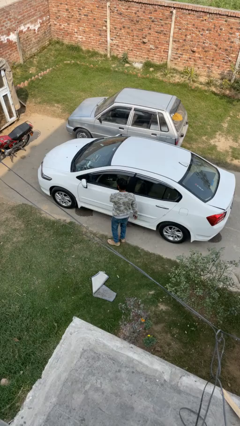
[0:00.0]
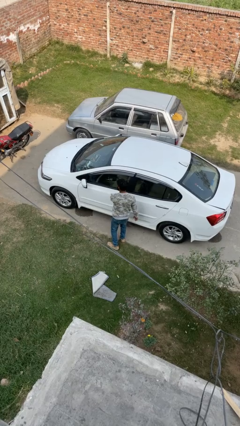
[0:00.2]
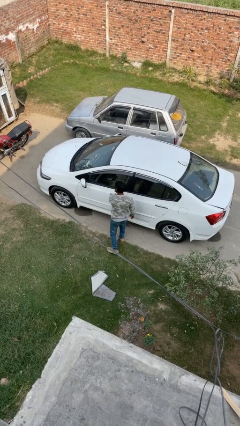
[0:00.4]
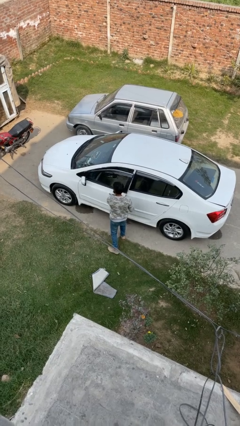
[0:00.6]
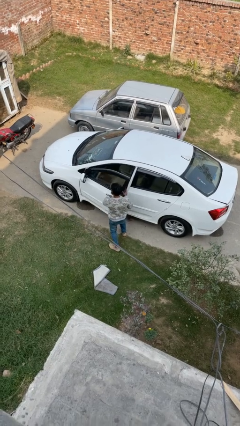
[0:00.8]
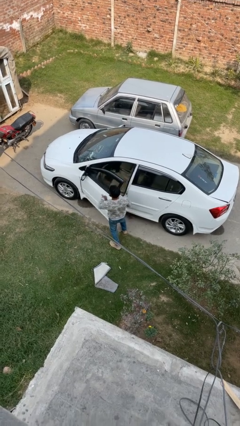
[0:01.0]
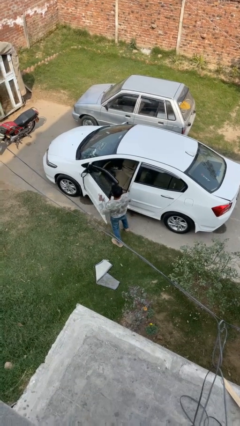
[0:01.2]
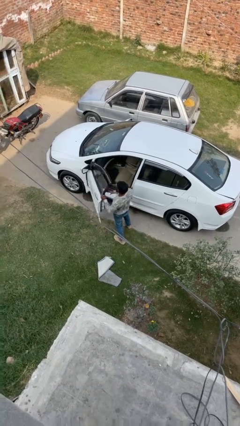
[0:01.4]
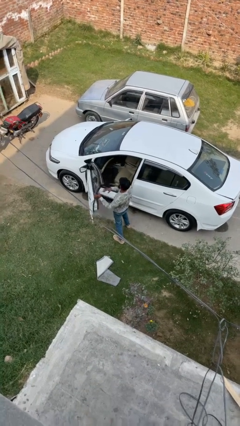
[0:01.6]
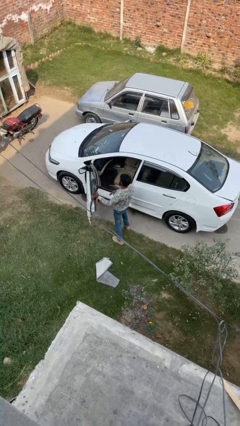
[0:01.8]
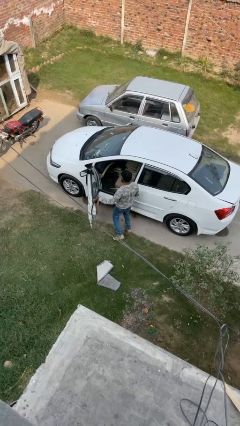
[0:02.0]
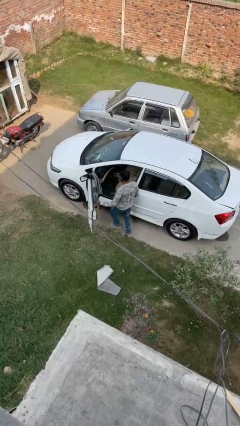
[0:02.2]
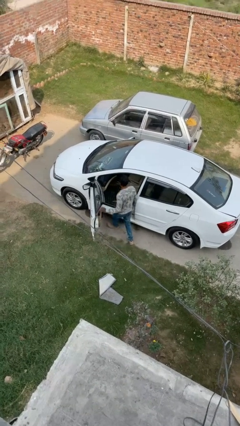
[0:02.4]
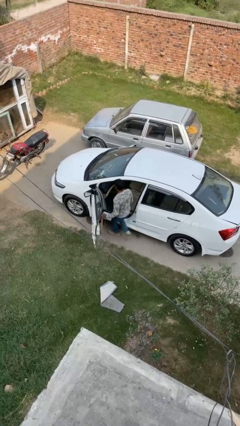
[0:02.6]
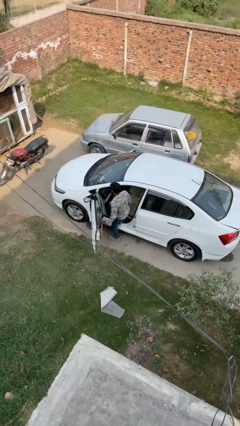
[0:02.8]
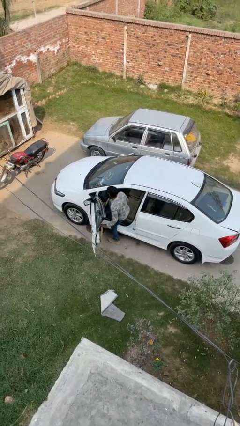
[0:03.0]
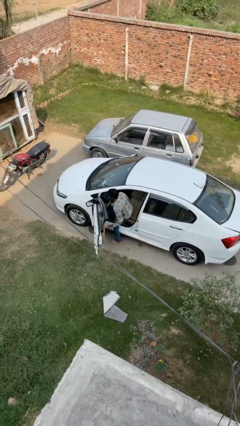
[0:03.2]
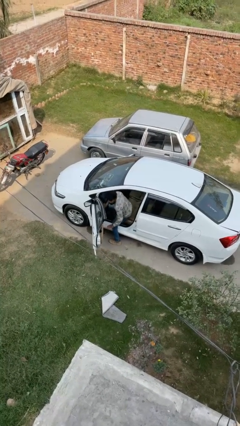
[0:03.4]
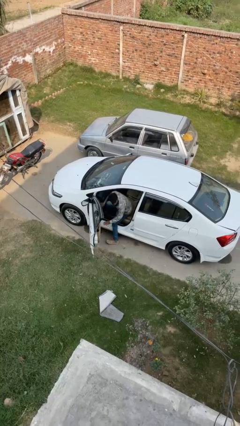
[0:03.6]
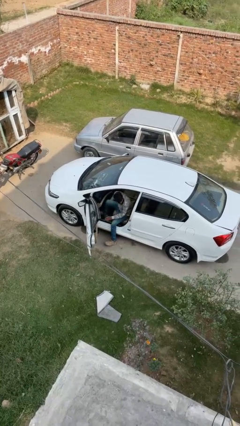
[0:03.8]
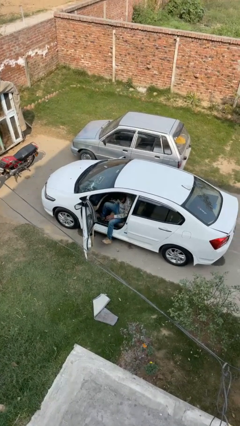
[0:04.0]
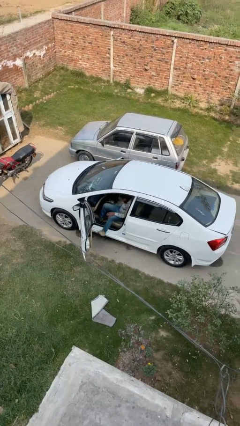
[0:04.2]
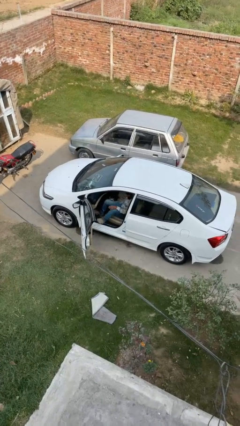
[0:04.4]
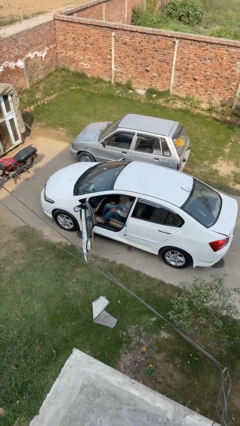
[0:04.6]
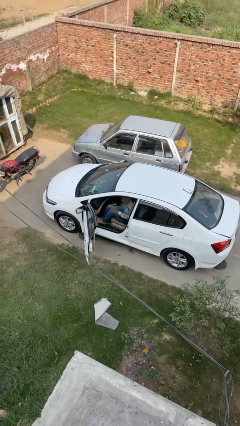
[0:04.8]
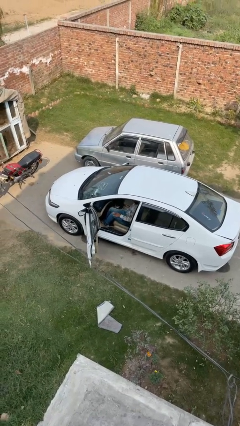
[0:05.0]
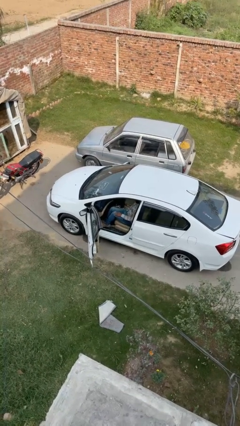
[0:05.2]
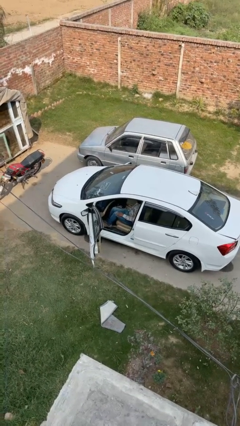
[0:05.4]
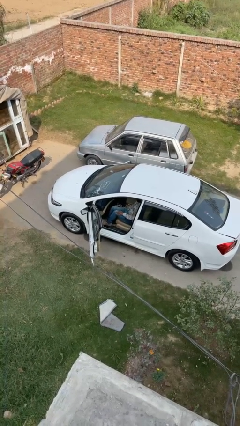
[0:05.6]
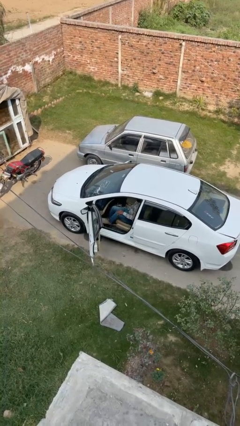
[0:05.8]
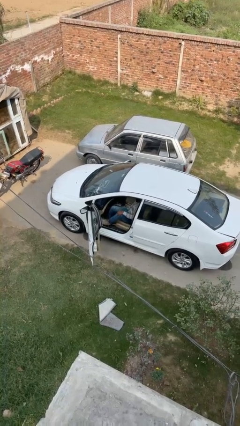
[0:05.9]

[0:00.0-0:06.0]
person enters car

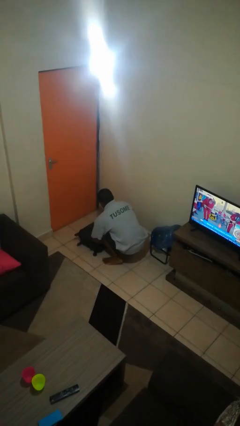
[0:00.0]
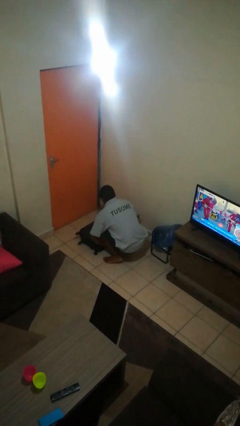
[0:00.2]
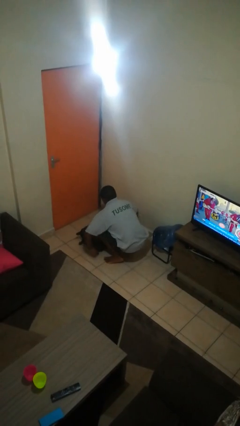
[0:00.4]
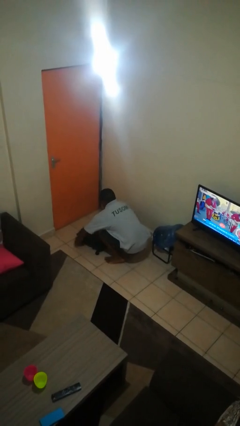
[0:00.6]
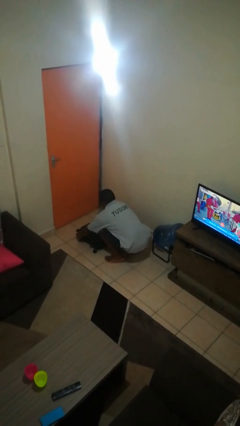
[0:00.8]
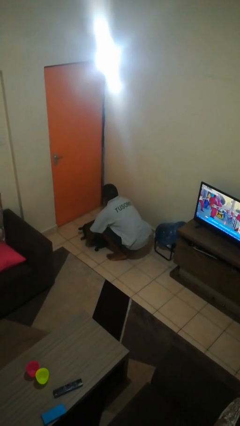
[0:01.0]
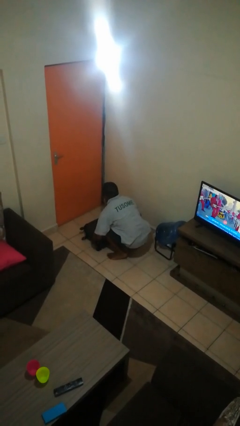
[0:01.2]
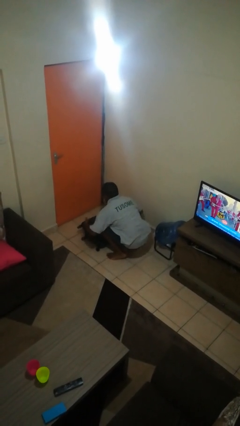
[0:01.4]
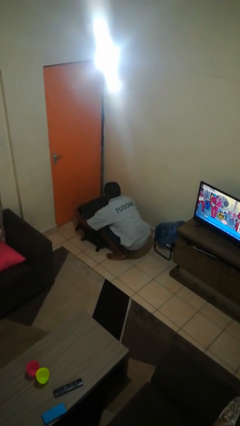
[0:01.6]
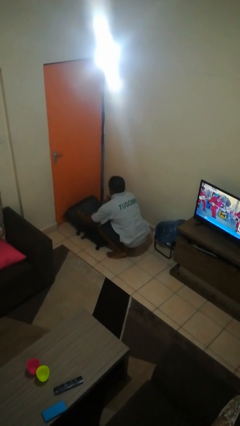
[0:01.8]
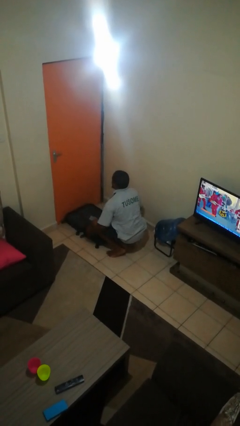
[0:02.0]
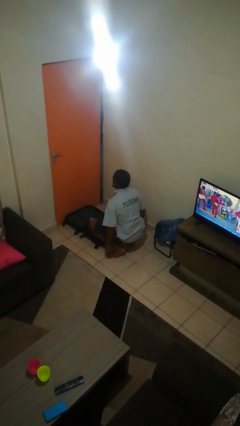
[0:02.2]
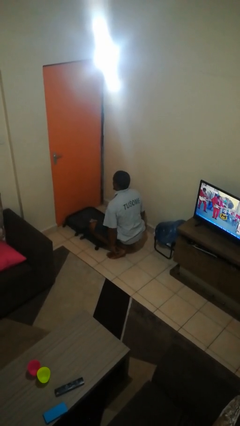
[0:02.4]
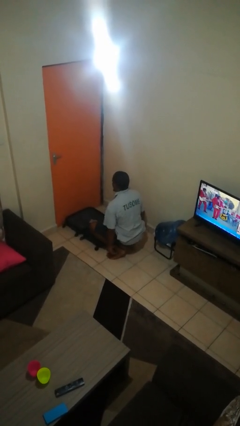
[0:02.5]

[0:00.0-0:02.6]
person opens suitcase

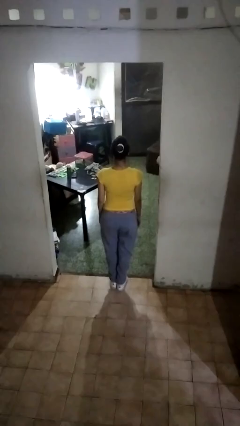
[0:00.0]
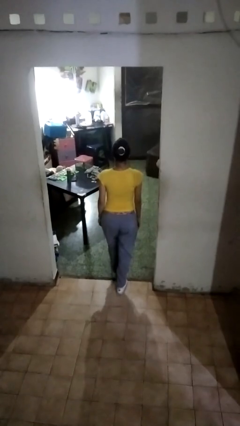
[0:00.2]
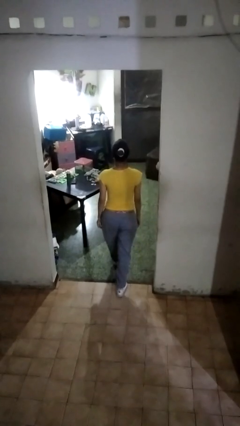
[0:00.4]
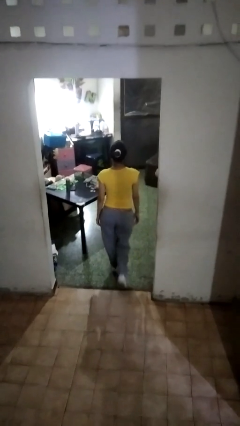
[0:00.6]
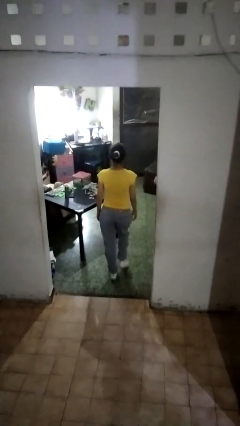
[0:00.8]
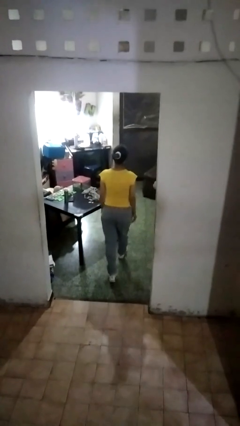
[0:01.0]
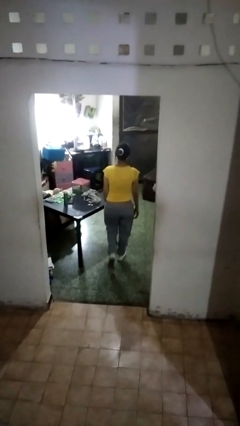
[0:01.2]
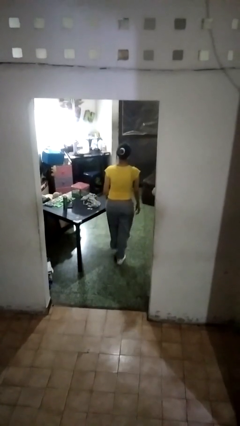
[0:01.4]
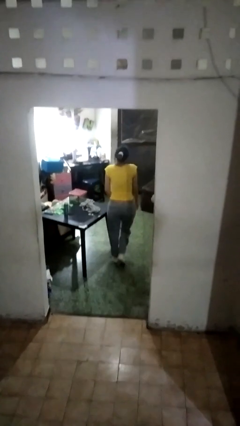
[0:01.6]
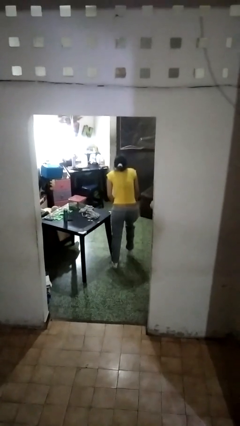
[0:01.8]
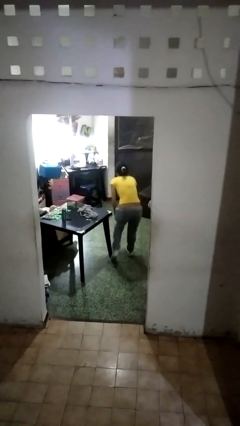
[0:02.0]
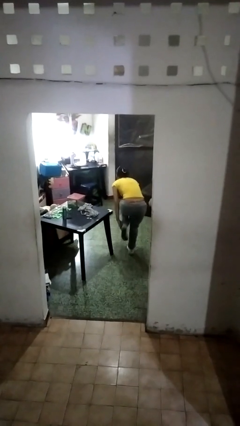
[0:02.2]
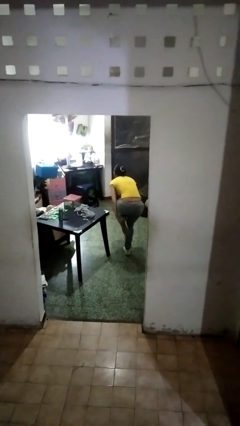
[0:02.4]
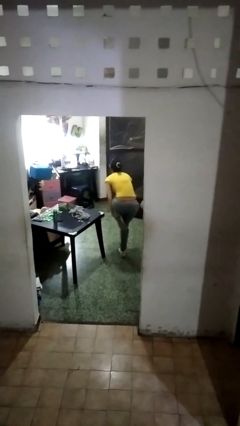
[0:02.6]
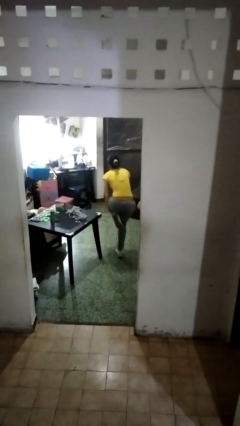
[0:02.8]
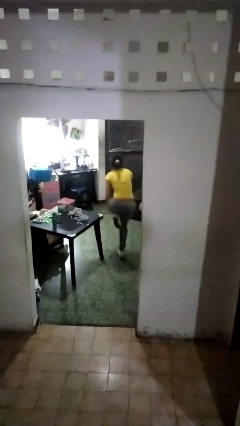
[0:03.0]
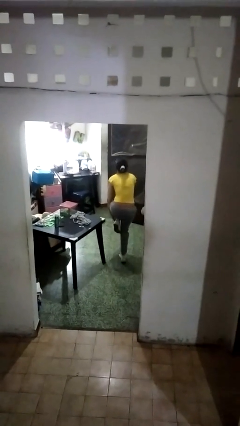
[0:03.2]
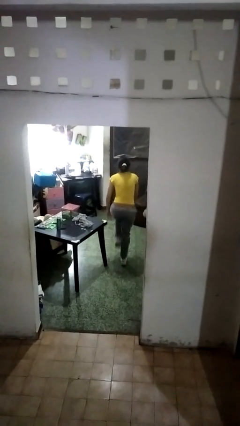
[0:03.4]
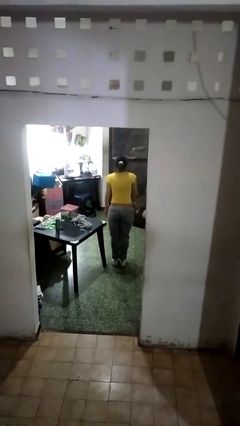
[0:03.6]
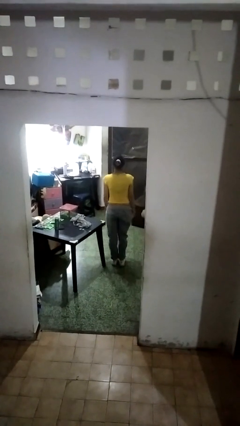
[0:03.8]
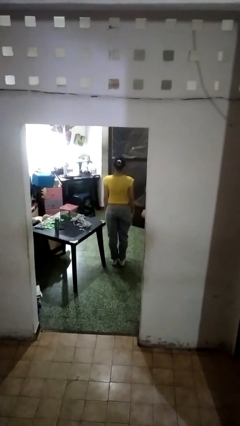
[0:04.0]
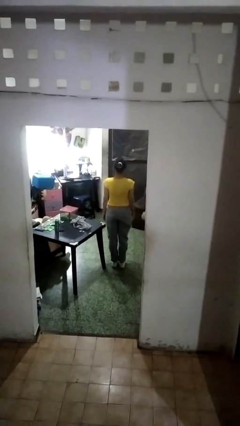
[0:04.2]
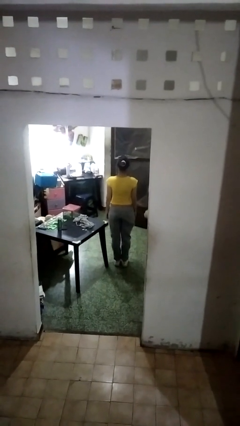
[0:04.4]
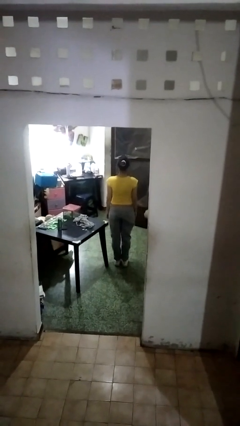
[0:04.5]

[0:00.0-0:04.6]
person bumps into table

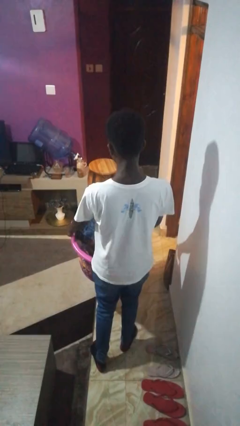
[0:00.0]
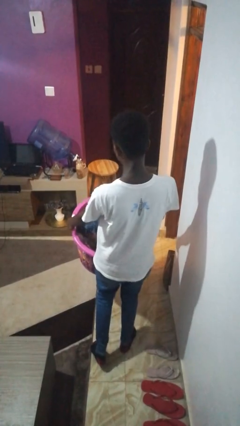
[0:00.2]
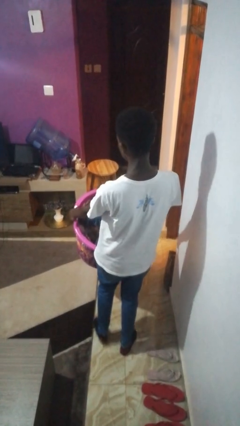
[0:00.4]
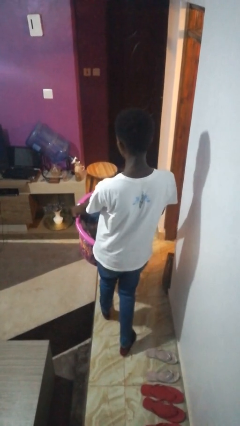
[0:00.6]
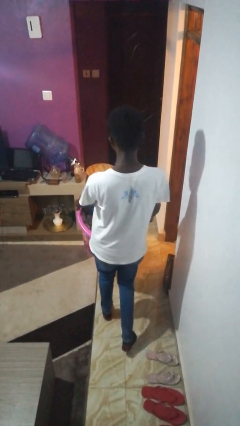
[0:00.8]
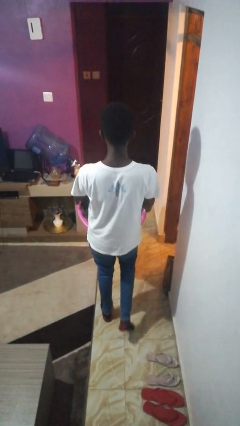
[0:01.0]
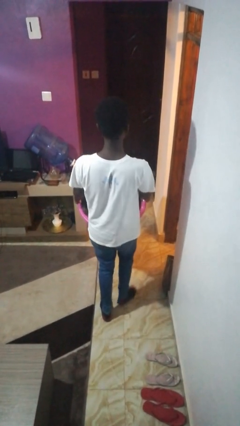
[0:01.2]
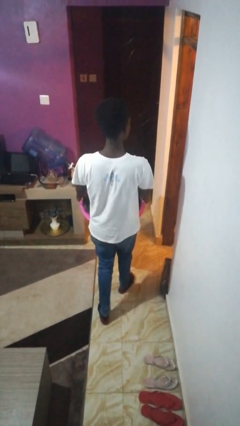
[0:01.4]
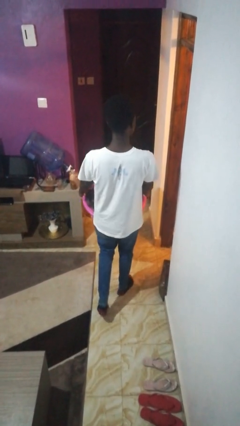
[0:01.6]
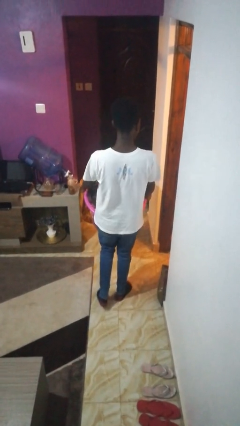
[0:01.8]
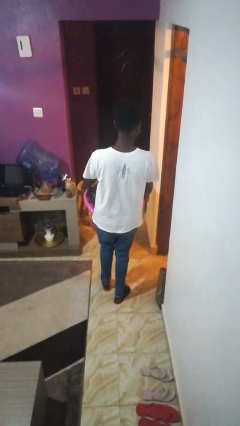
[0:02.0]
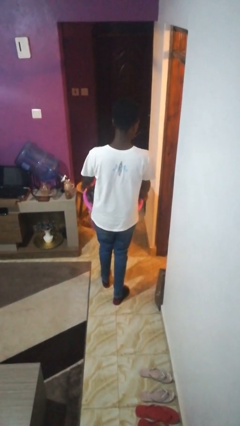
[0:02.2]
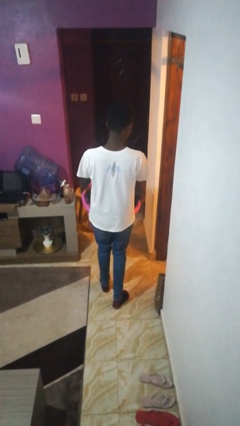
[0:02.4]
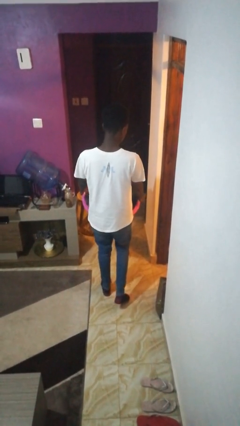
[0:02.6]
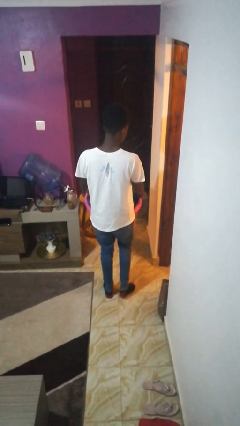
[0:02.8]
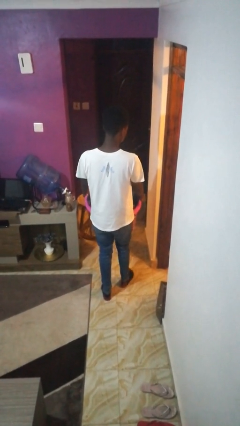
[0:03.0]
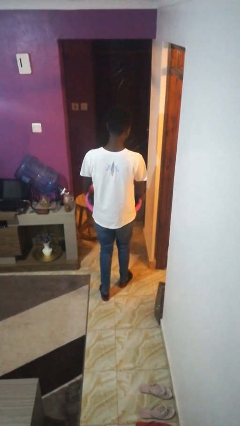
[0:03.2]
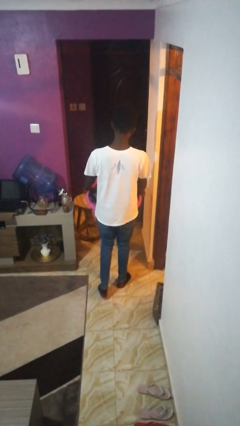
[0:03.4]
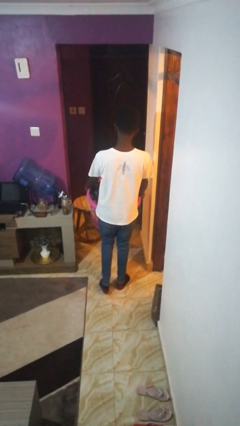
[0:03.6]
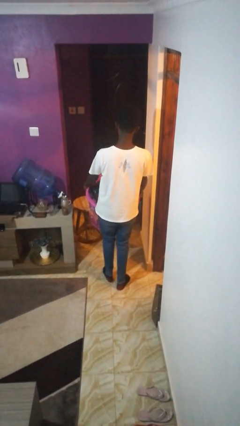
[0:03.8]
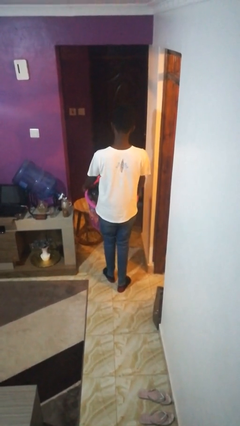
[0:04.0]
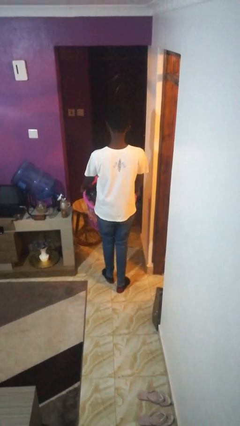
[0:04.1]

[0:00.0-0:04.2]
person carries laundry basket

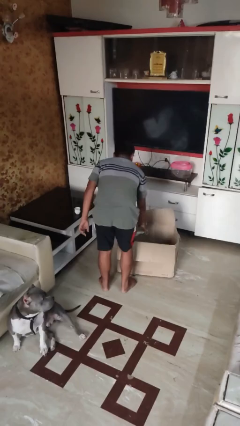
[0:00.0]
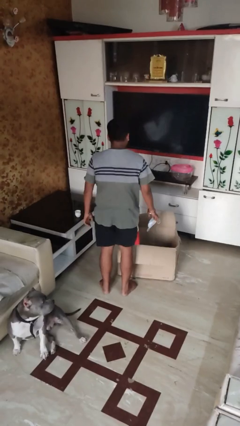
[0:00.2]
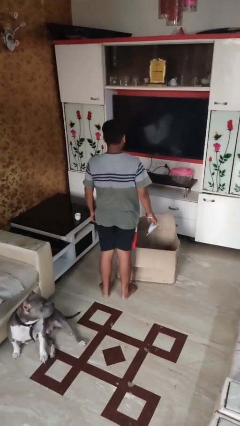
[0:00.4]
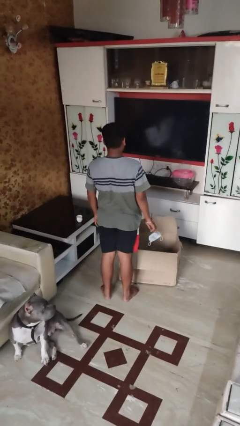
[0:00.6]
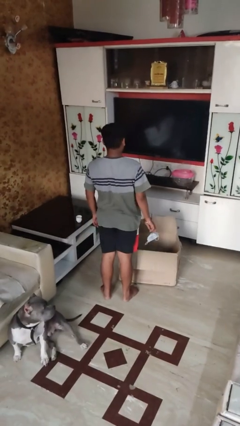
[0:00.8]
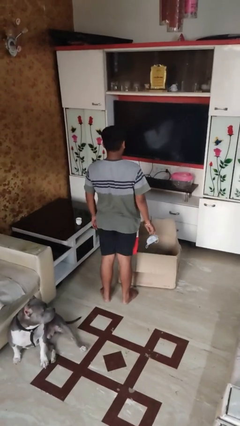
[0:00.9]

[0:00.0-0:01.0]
person takes object from box
